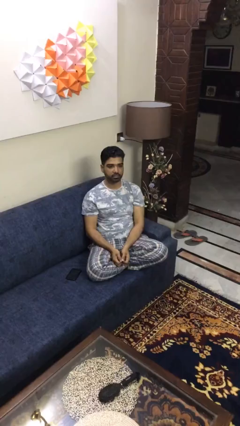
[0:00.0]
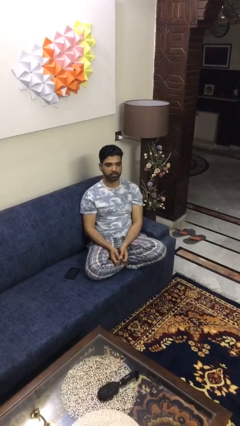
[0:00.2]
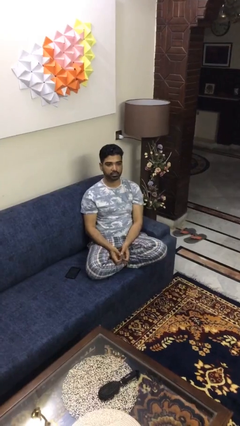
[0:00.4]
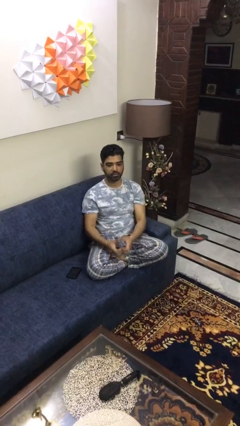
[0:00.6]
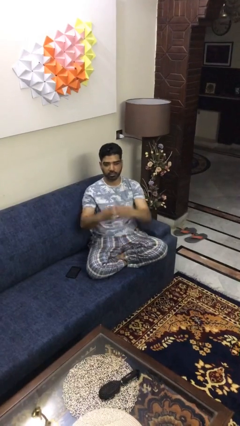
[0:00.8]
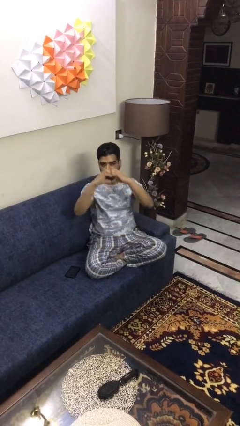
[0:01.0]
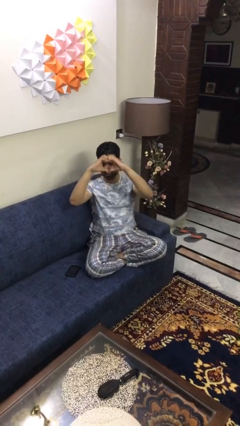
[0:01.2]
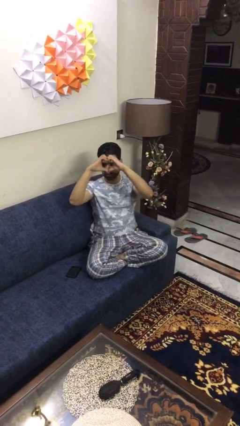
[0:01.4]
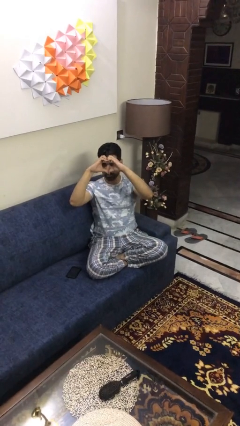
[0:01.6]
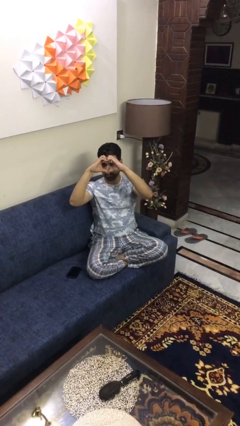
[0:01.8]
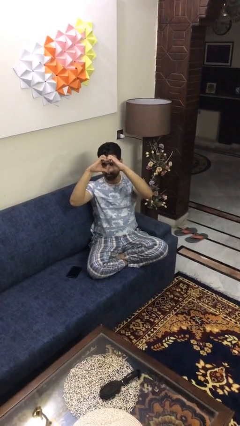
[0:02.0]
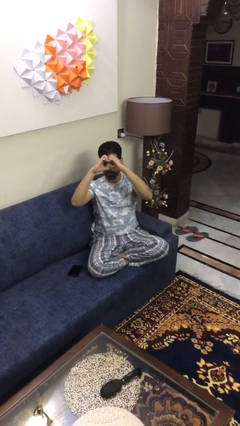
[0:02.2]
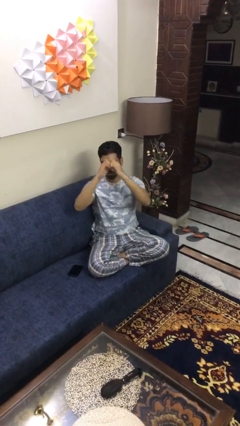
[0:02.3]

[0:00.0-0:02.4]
person gestures heart

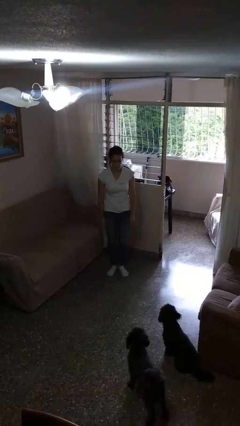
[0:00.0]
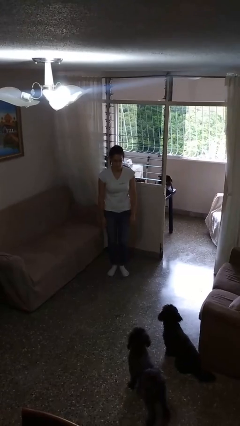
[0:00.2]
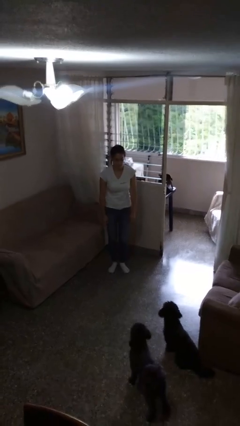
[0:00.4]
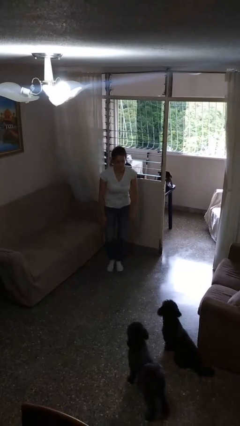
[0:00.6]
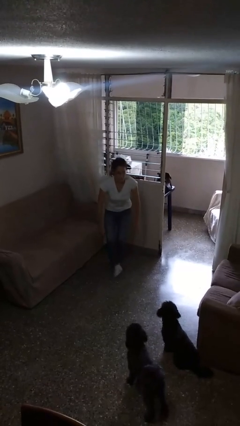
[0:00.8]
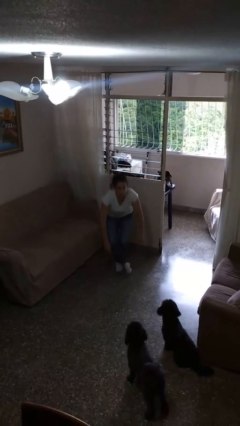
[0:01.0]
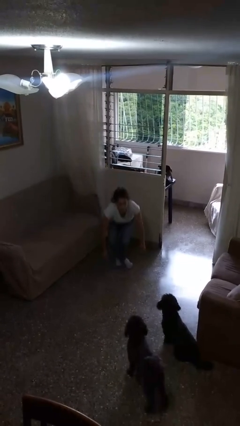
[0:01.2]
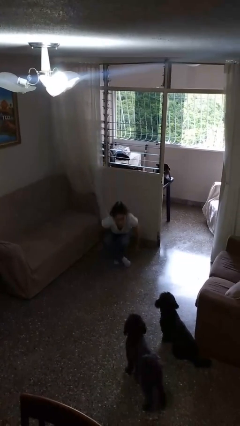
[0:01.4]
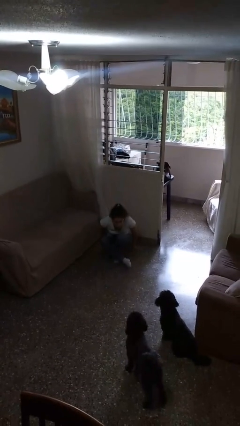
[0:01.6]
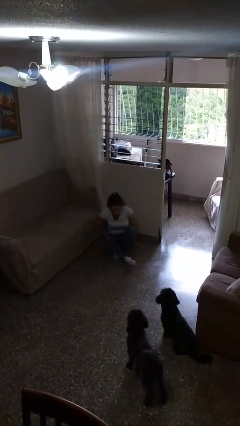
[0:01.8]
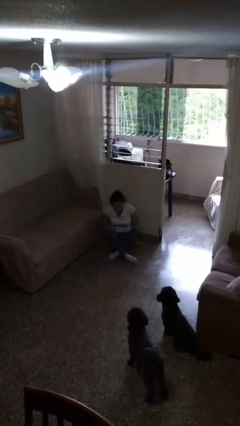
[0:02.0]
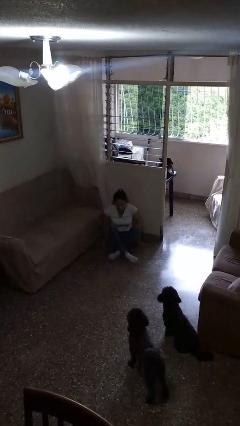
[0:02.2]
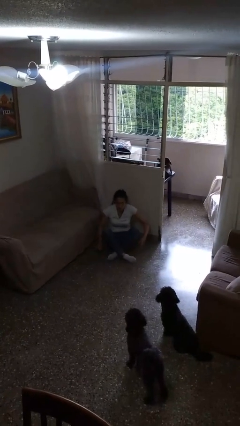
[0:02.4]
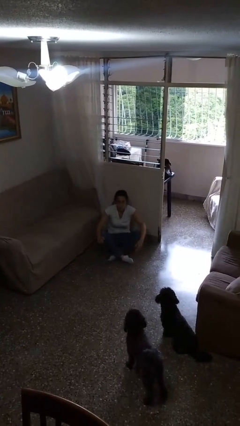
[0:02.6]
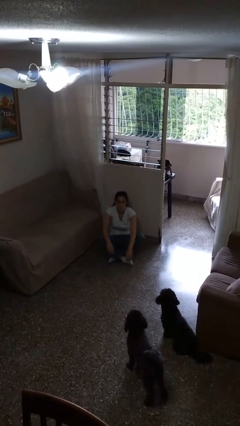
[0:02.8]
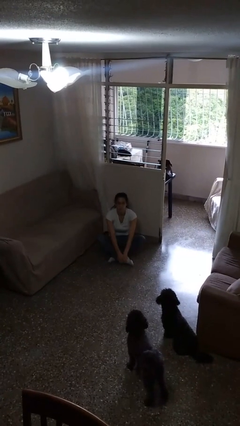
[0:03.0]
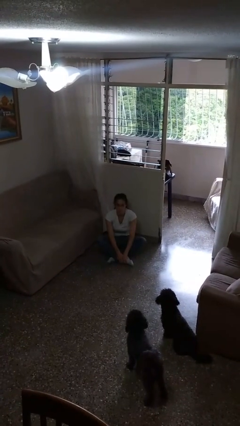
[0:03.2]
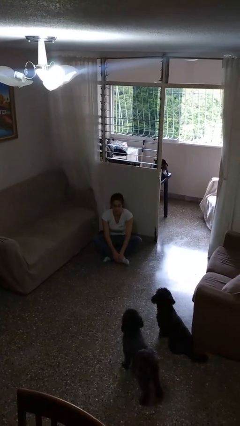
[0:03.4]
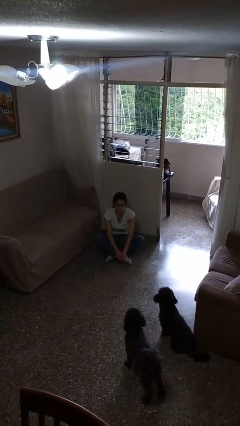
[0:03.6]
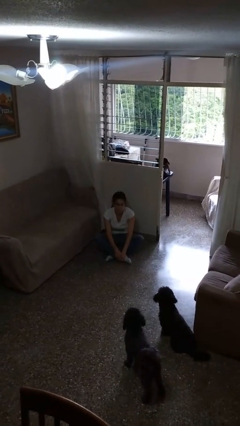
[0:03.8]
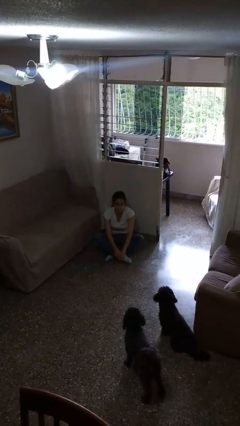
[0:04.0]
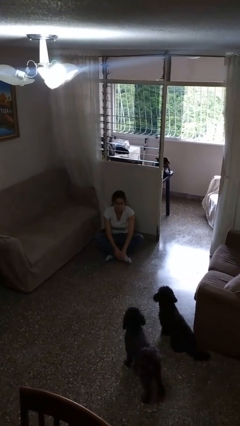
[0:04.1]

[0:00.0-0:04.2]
person sits crisscross

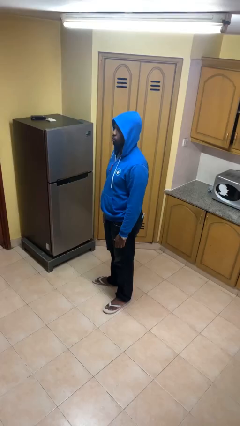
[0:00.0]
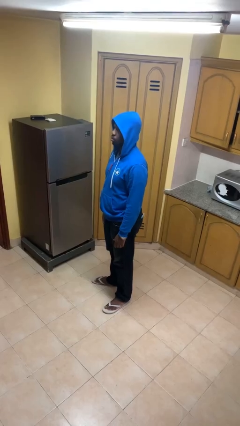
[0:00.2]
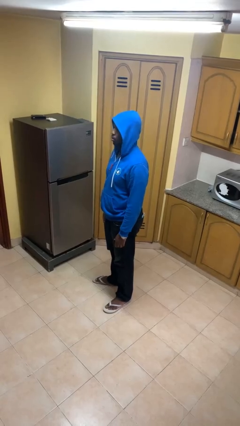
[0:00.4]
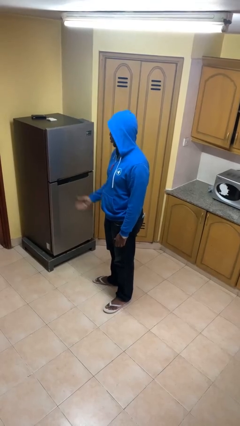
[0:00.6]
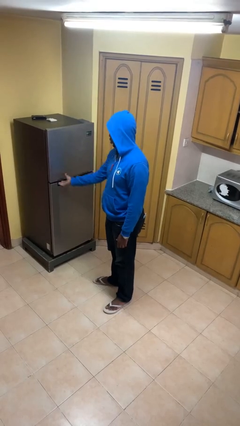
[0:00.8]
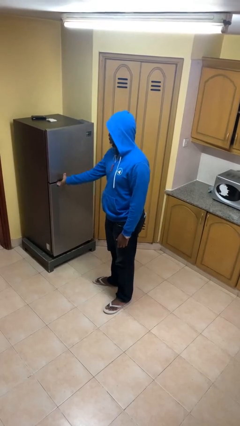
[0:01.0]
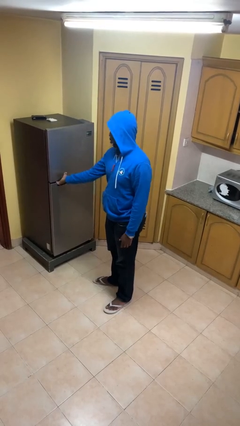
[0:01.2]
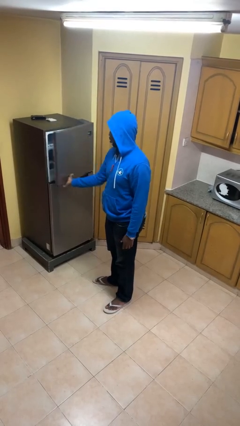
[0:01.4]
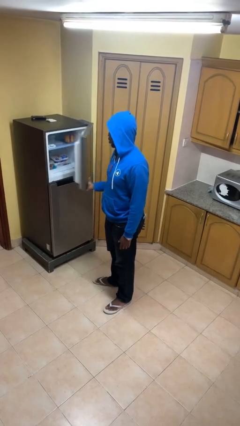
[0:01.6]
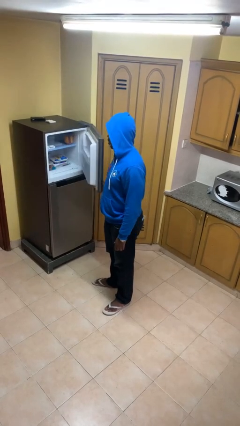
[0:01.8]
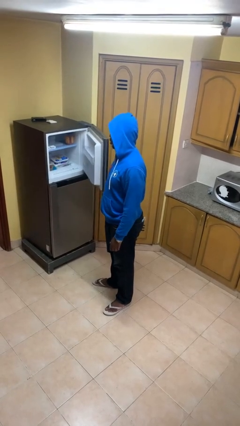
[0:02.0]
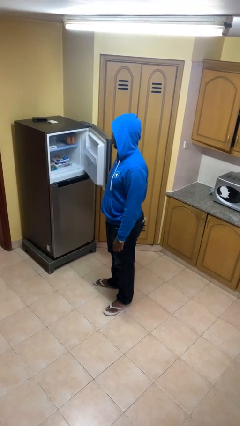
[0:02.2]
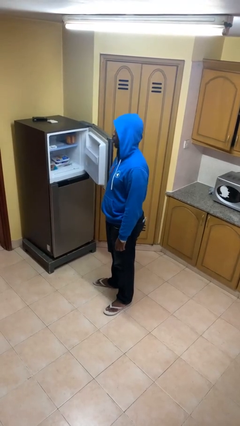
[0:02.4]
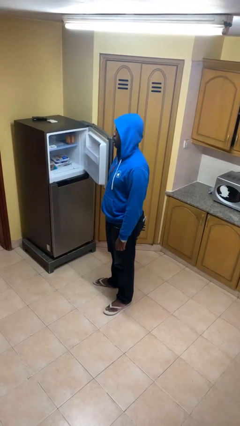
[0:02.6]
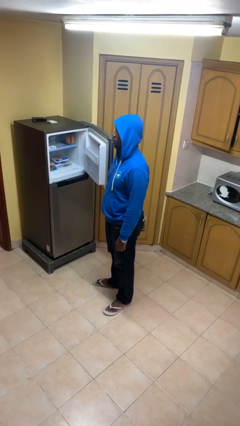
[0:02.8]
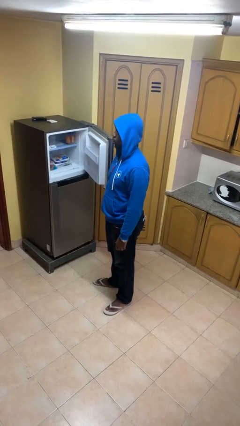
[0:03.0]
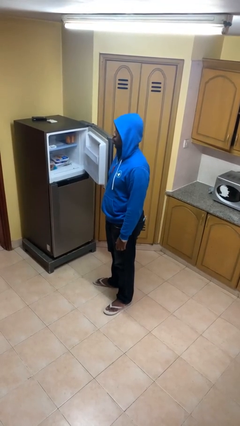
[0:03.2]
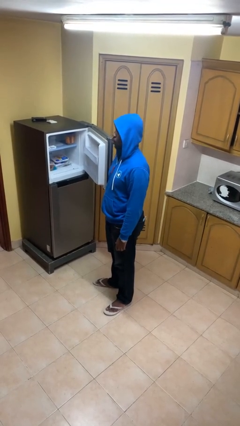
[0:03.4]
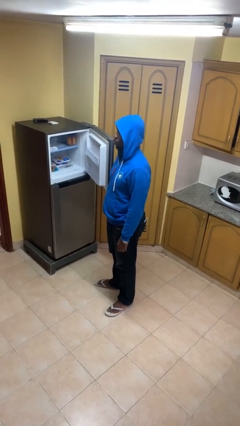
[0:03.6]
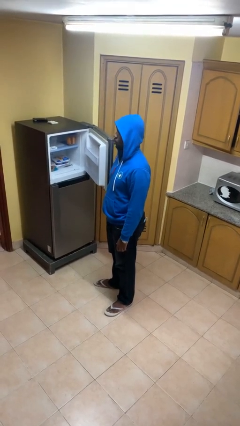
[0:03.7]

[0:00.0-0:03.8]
person opens refrigerator

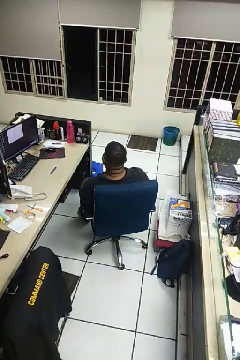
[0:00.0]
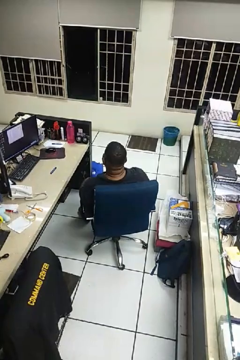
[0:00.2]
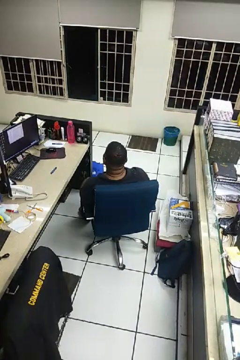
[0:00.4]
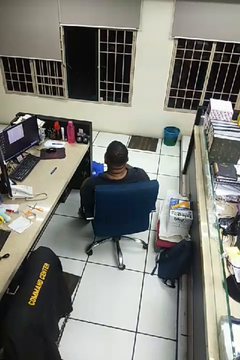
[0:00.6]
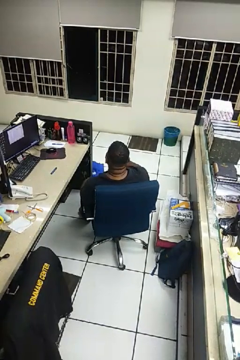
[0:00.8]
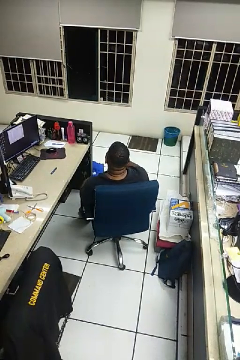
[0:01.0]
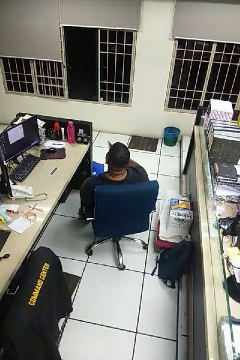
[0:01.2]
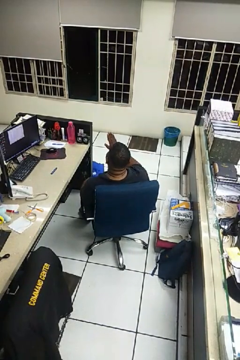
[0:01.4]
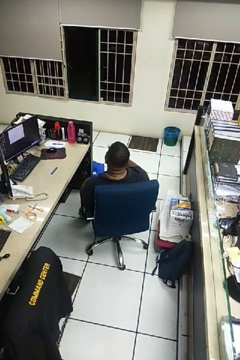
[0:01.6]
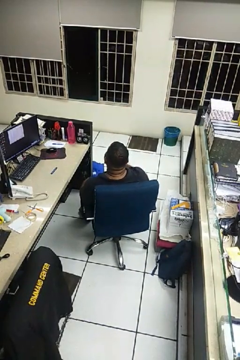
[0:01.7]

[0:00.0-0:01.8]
person gestures blow kiss

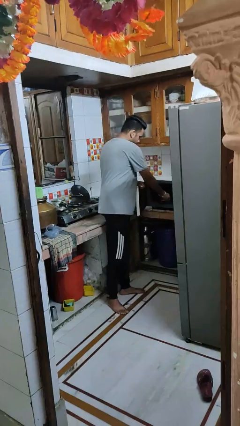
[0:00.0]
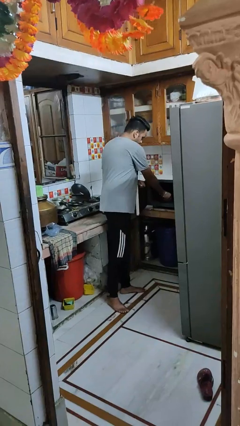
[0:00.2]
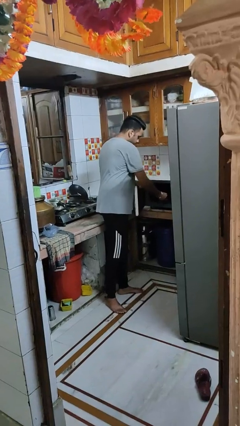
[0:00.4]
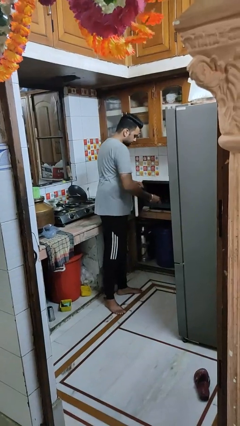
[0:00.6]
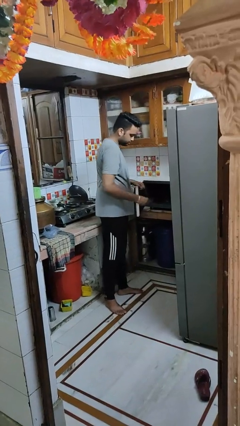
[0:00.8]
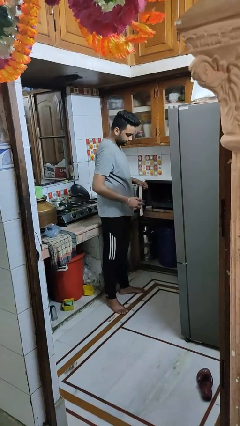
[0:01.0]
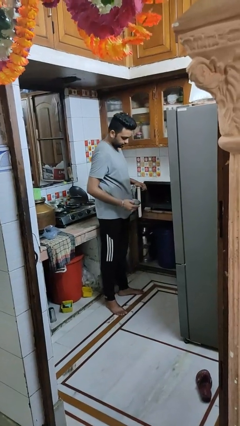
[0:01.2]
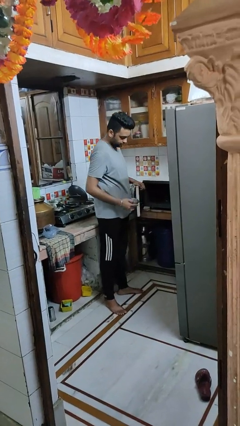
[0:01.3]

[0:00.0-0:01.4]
person takes object from microwave

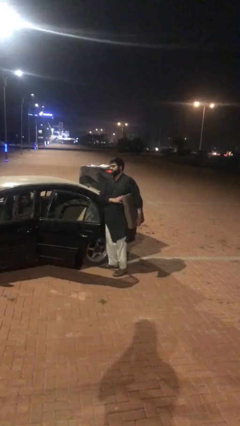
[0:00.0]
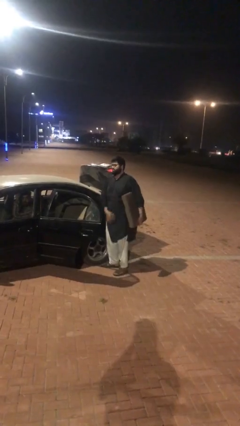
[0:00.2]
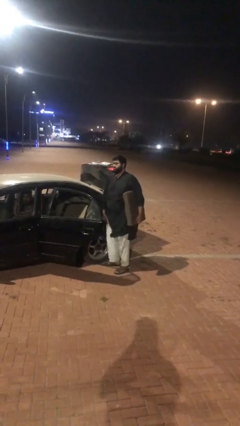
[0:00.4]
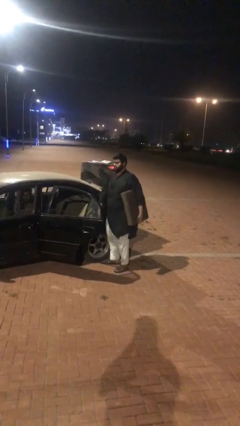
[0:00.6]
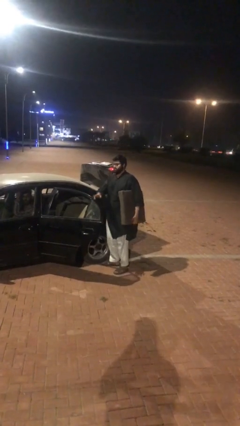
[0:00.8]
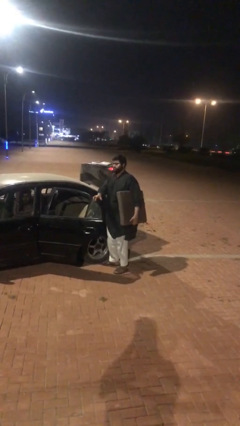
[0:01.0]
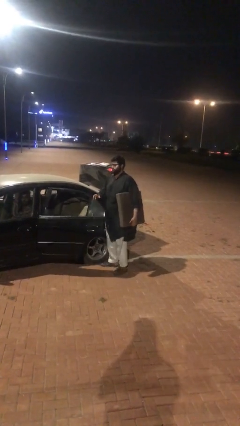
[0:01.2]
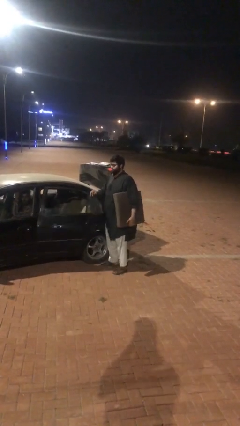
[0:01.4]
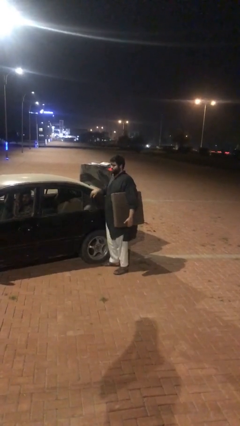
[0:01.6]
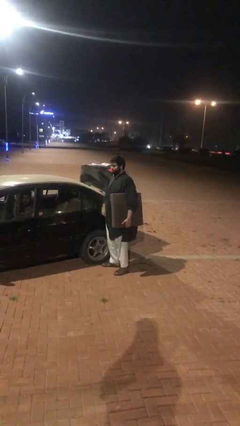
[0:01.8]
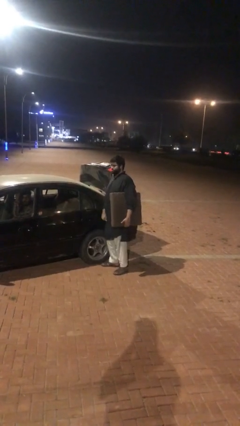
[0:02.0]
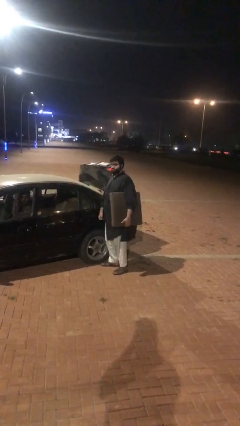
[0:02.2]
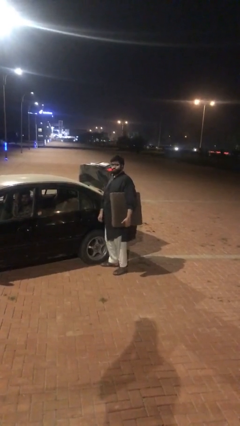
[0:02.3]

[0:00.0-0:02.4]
person closes car door

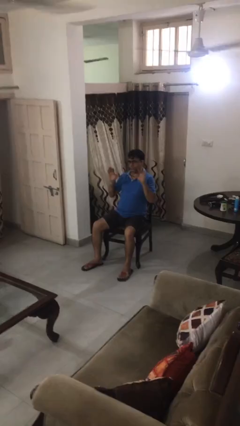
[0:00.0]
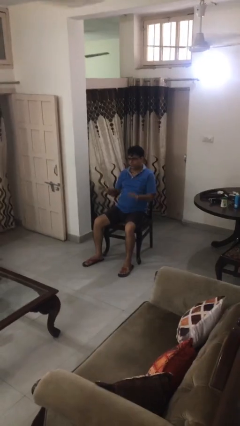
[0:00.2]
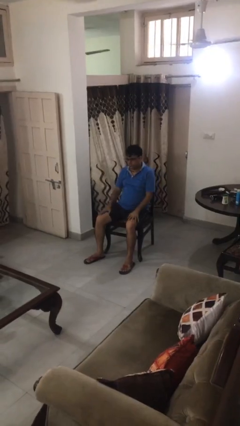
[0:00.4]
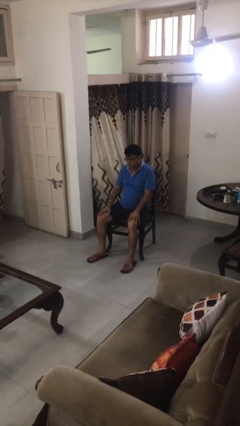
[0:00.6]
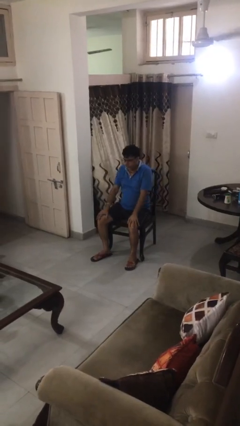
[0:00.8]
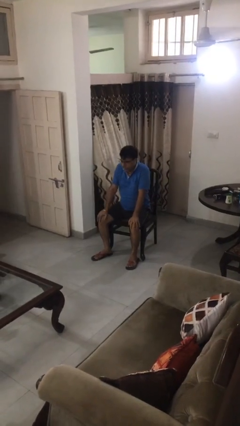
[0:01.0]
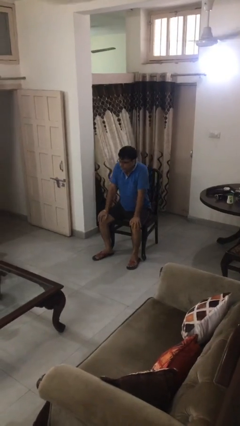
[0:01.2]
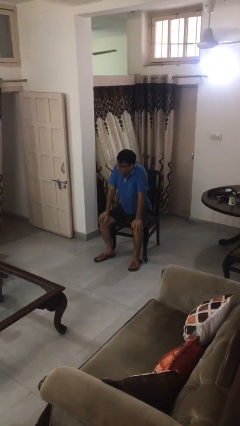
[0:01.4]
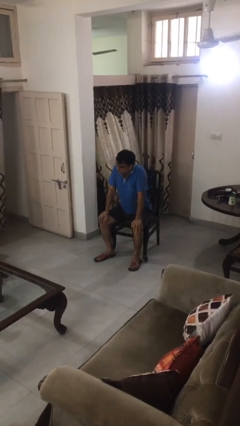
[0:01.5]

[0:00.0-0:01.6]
person slaps hands on thighs
